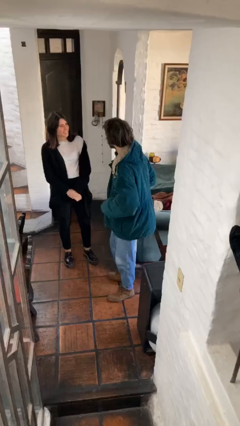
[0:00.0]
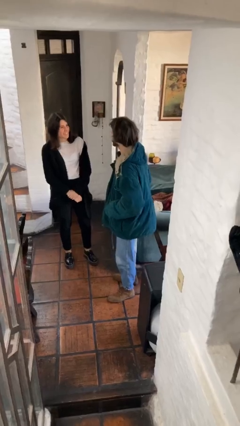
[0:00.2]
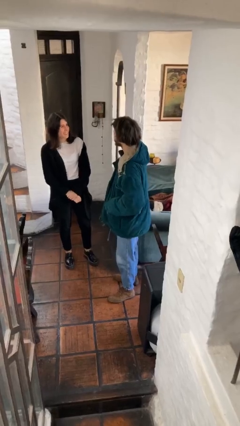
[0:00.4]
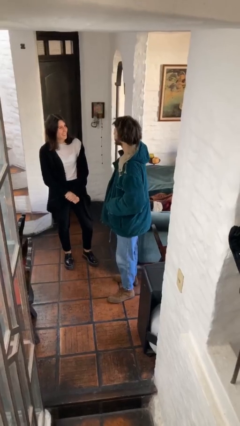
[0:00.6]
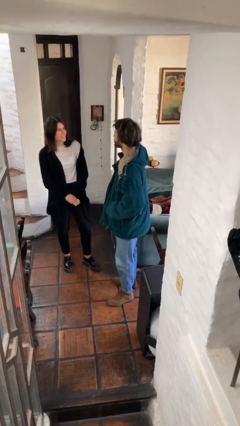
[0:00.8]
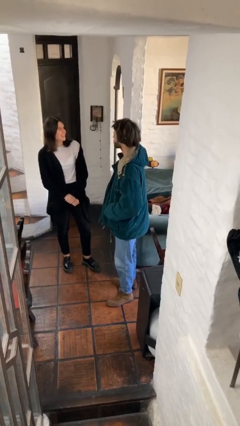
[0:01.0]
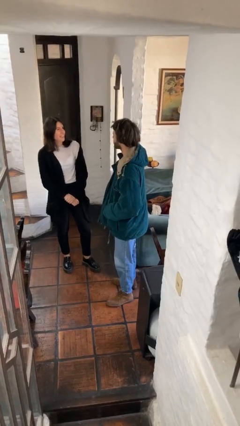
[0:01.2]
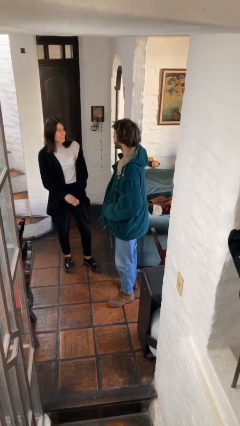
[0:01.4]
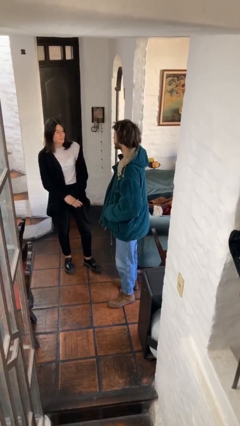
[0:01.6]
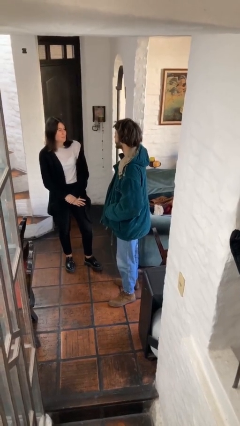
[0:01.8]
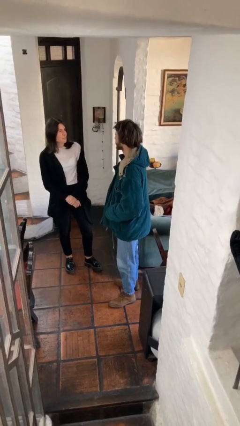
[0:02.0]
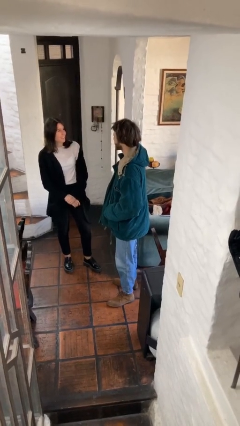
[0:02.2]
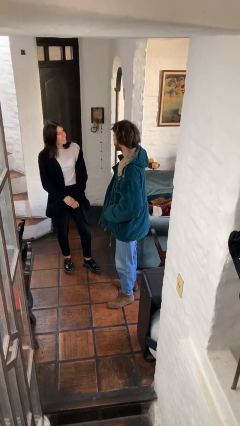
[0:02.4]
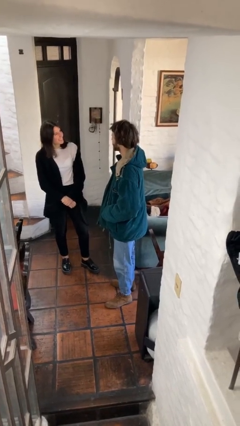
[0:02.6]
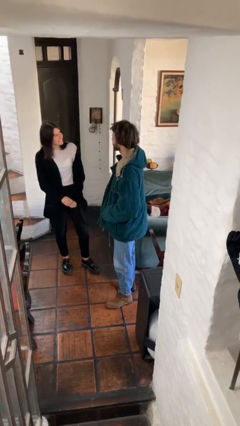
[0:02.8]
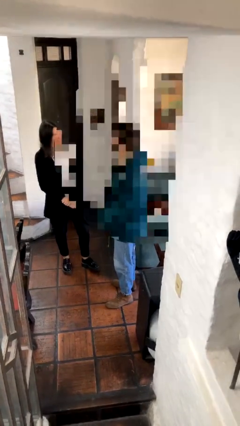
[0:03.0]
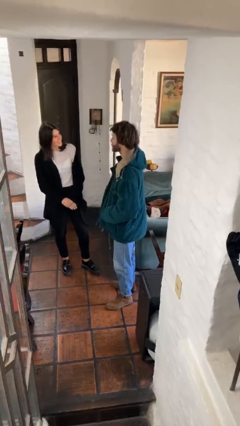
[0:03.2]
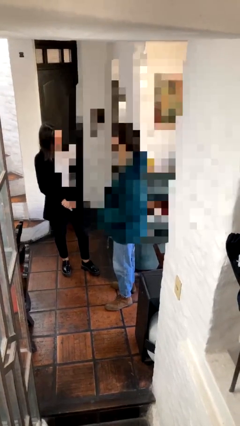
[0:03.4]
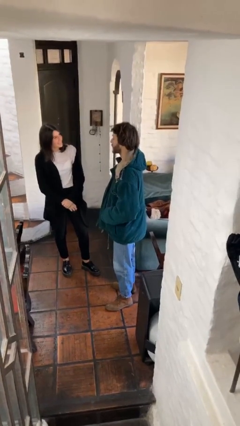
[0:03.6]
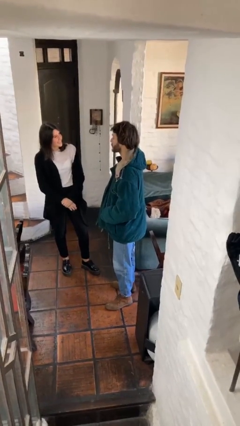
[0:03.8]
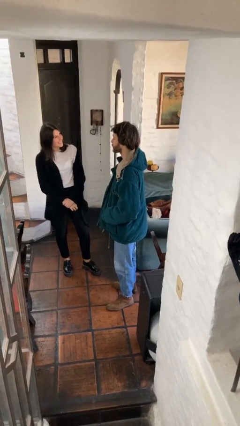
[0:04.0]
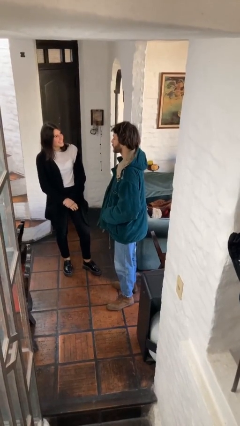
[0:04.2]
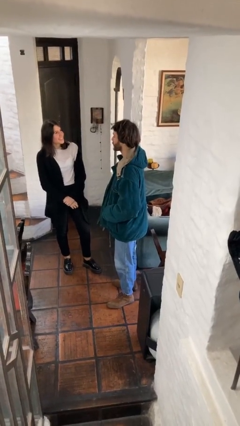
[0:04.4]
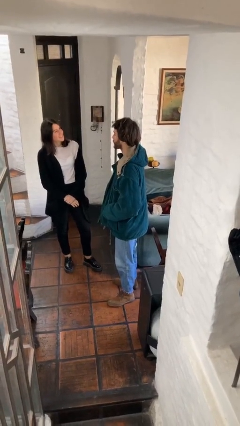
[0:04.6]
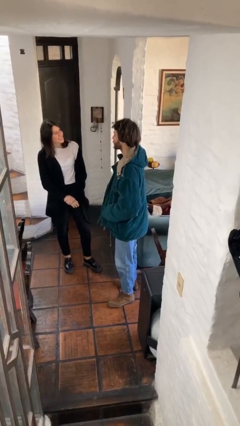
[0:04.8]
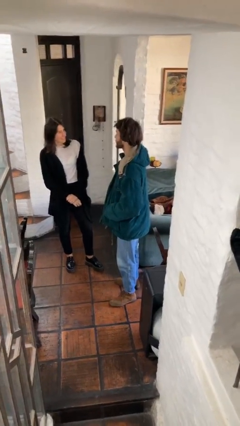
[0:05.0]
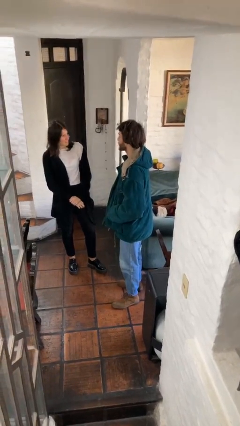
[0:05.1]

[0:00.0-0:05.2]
person talks to person

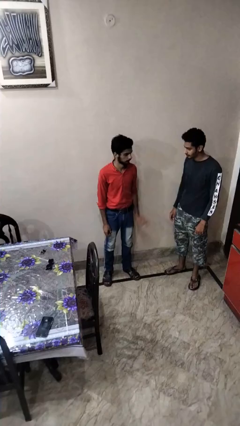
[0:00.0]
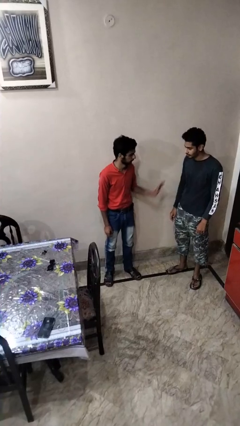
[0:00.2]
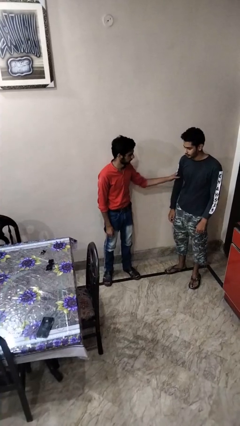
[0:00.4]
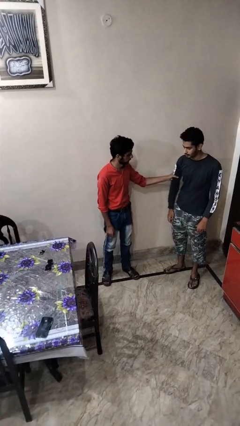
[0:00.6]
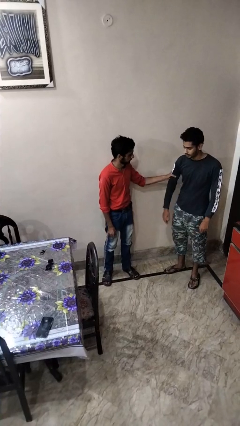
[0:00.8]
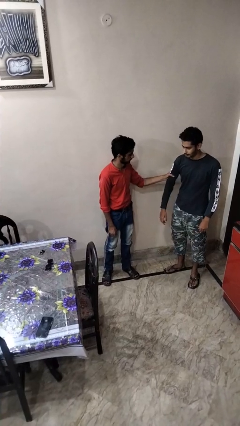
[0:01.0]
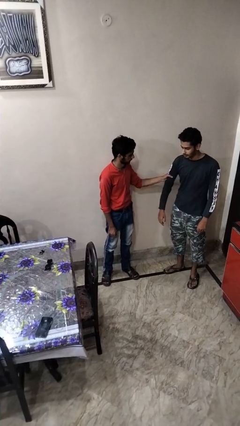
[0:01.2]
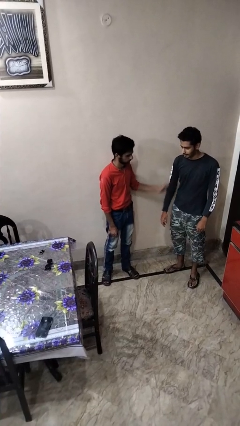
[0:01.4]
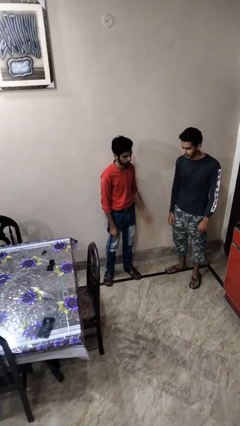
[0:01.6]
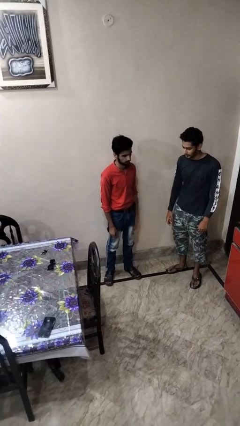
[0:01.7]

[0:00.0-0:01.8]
person grabs person by bicep

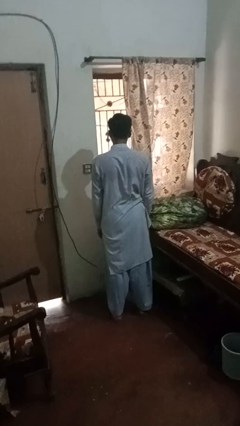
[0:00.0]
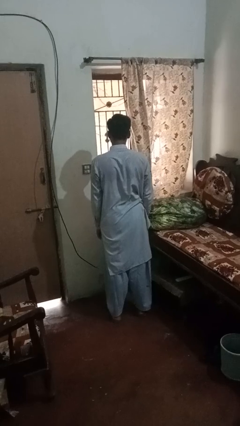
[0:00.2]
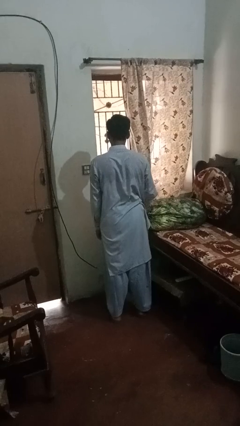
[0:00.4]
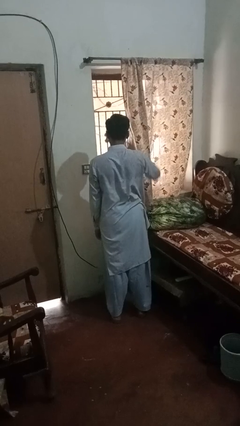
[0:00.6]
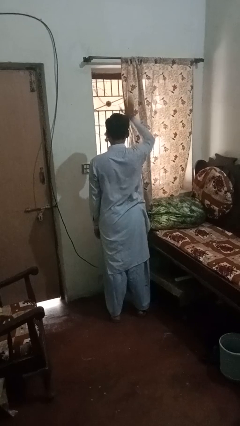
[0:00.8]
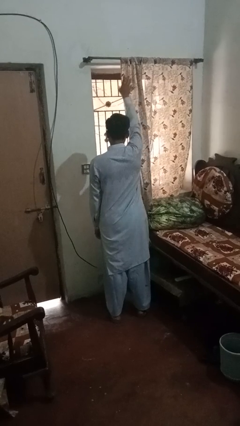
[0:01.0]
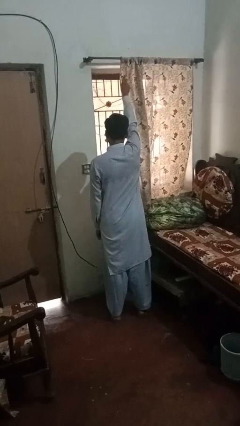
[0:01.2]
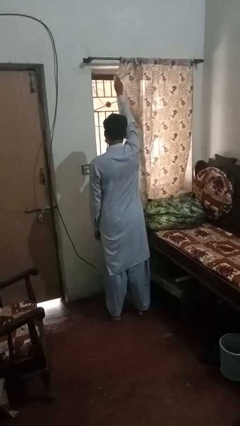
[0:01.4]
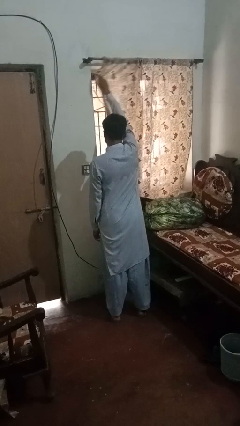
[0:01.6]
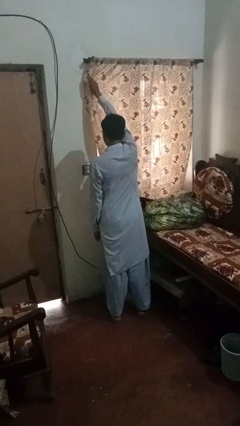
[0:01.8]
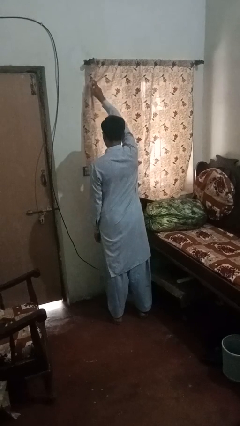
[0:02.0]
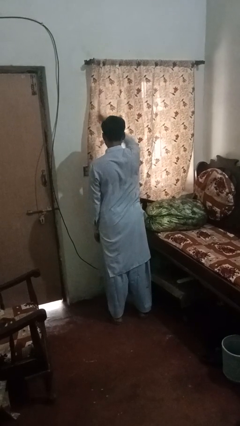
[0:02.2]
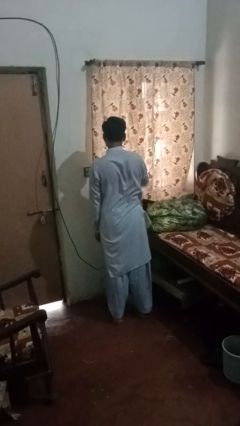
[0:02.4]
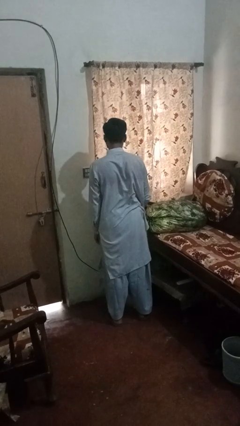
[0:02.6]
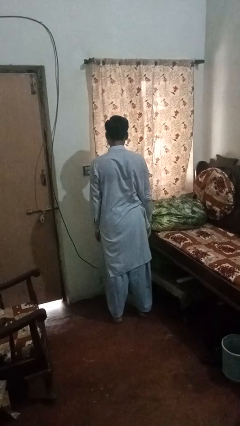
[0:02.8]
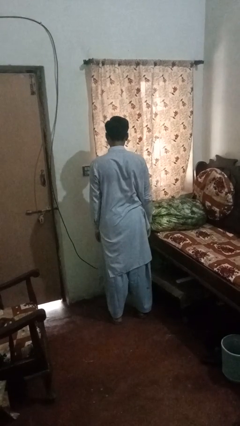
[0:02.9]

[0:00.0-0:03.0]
person closes curtains

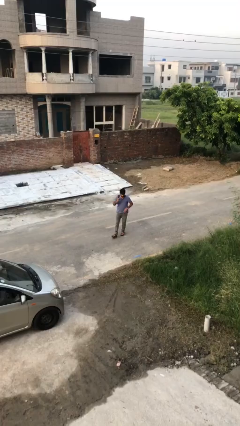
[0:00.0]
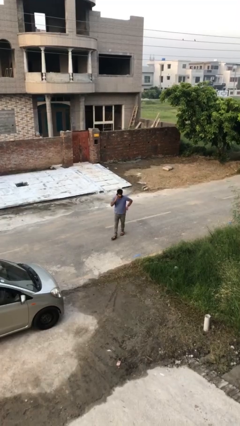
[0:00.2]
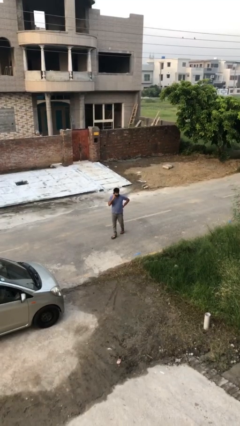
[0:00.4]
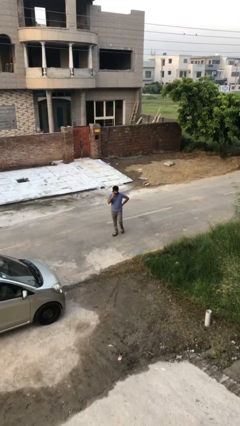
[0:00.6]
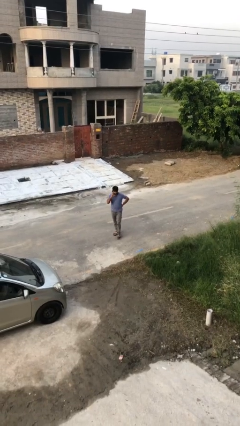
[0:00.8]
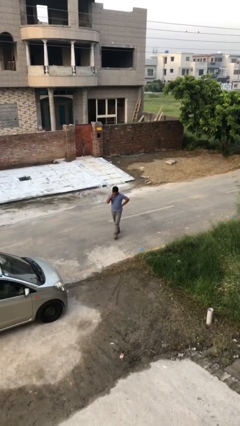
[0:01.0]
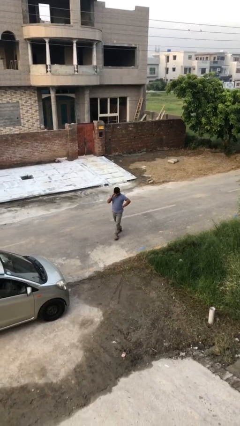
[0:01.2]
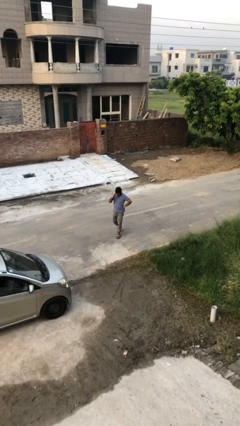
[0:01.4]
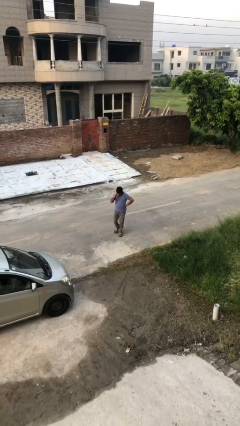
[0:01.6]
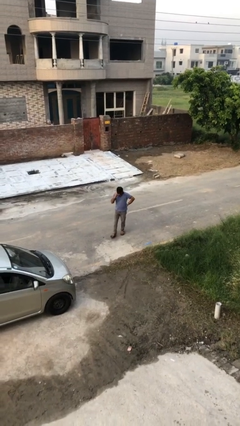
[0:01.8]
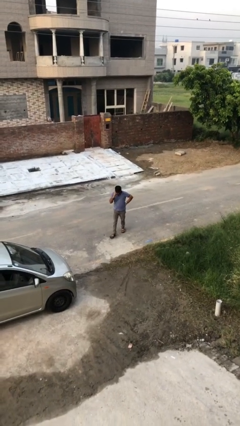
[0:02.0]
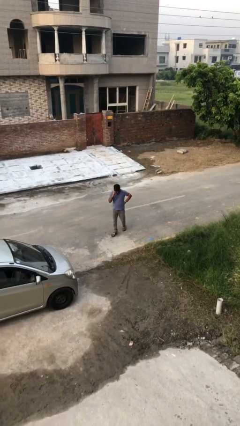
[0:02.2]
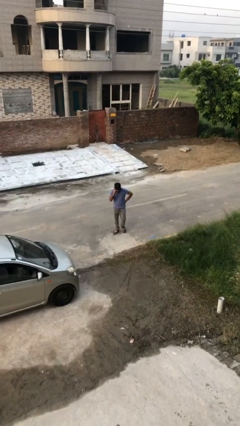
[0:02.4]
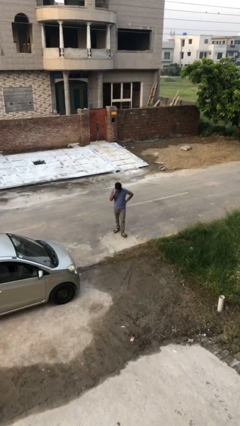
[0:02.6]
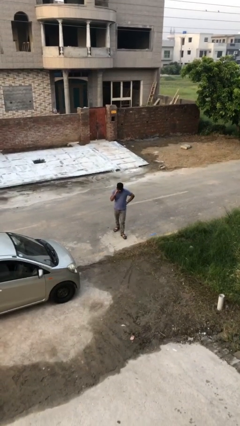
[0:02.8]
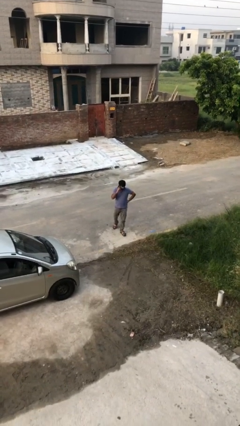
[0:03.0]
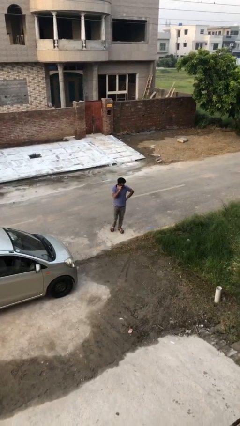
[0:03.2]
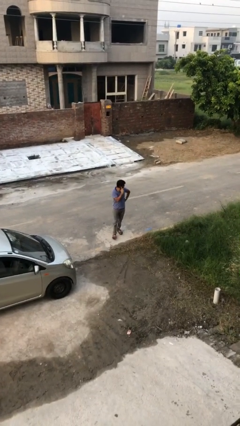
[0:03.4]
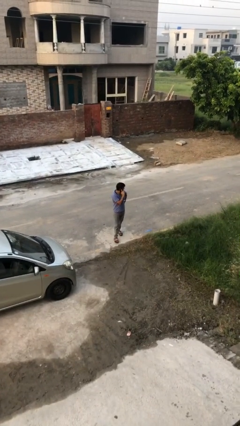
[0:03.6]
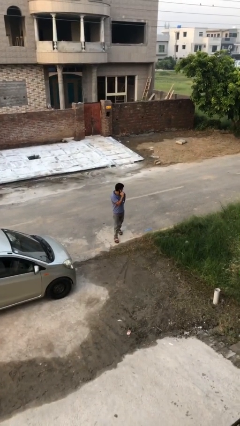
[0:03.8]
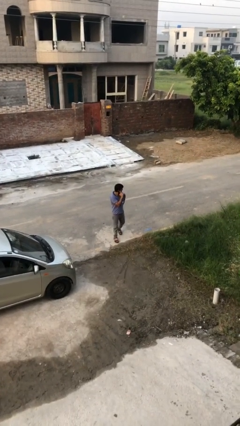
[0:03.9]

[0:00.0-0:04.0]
person talks on phone

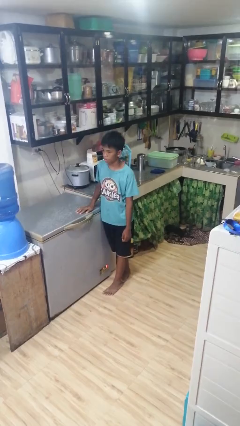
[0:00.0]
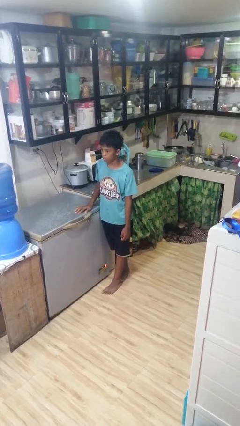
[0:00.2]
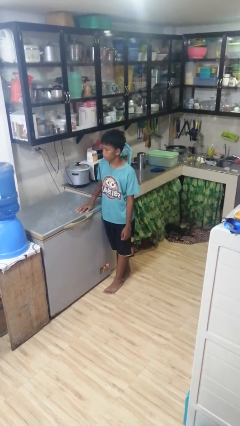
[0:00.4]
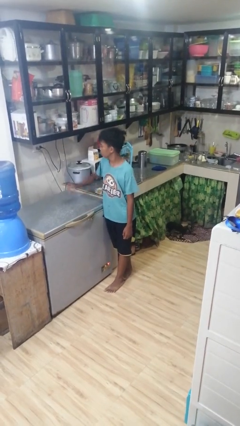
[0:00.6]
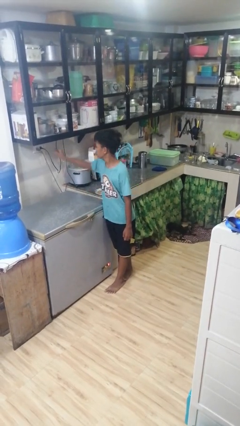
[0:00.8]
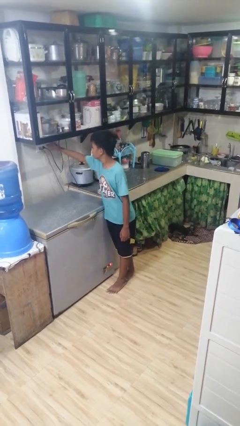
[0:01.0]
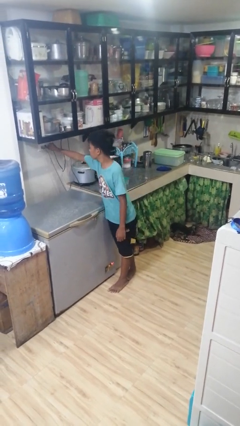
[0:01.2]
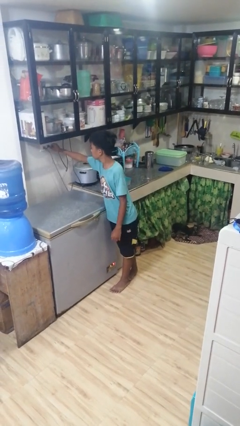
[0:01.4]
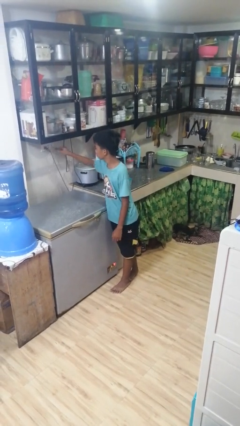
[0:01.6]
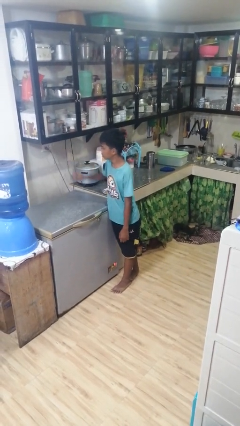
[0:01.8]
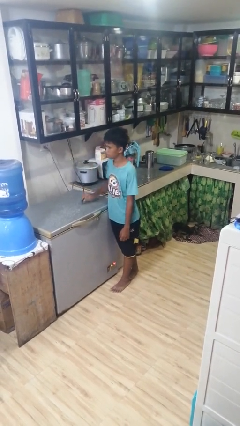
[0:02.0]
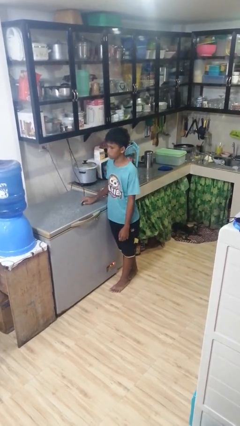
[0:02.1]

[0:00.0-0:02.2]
person unplugs from electrical socket

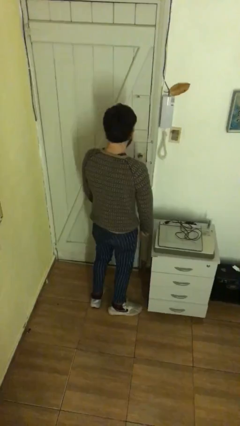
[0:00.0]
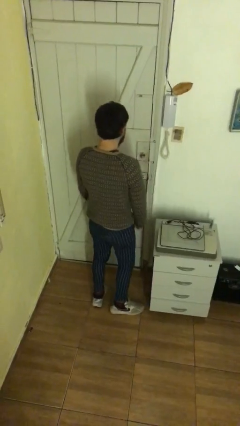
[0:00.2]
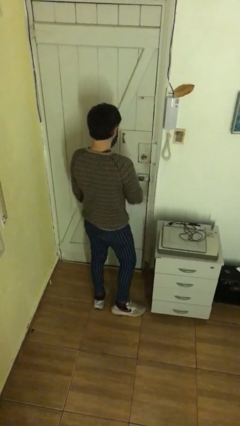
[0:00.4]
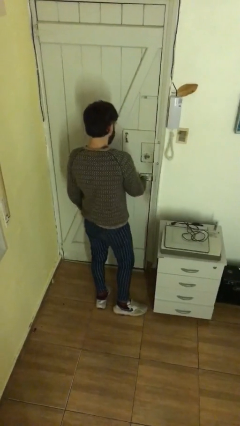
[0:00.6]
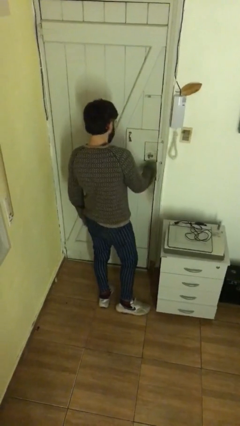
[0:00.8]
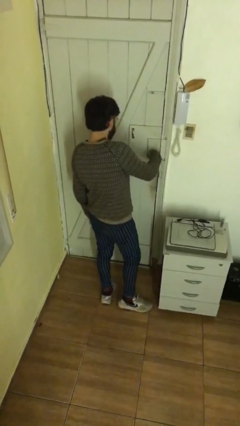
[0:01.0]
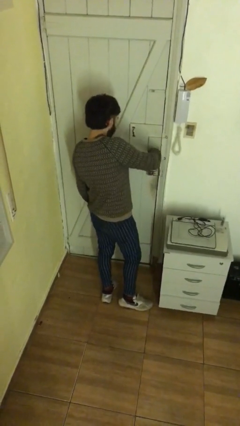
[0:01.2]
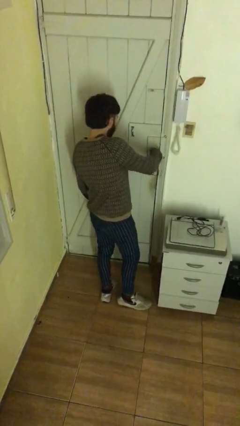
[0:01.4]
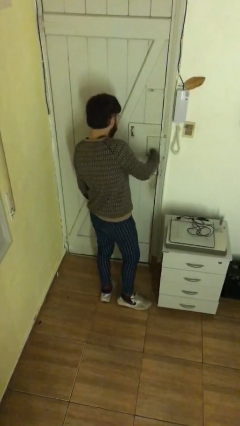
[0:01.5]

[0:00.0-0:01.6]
person unlocks door with keys
